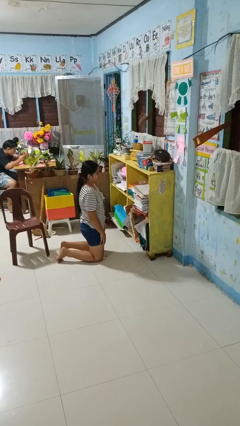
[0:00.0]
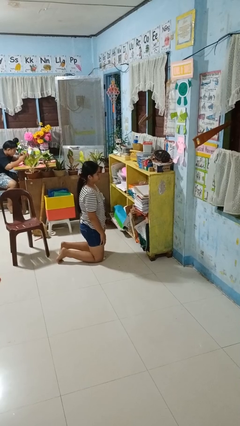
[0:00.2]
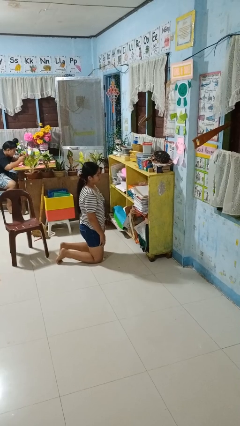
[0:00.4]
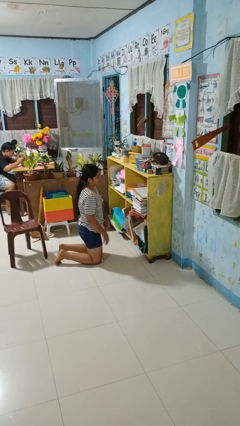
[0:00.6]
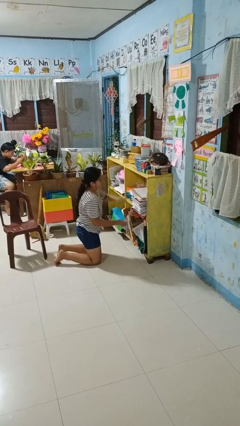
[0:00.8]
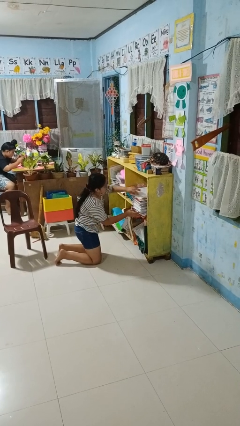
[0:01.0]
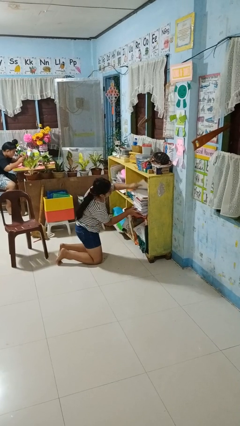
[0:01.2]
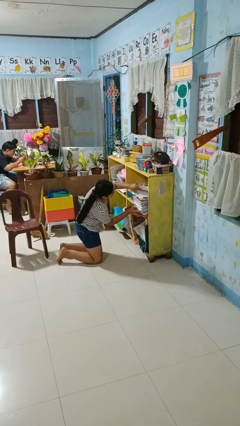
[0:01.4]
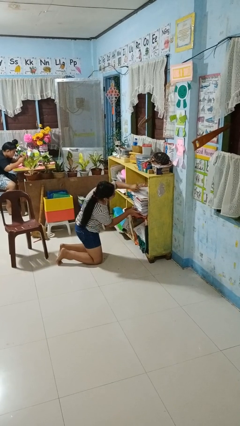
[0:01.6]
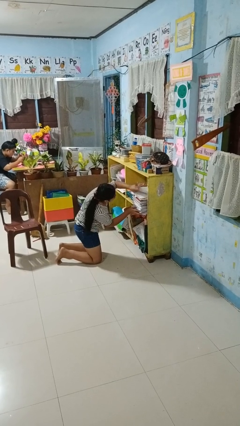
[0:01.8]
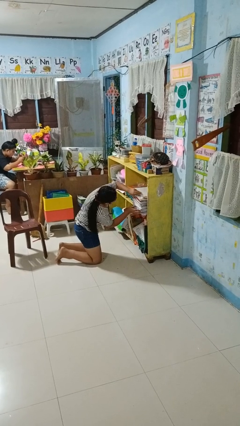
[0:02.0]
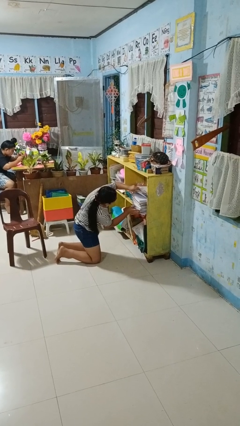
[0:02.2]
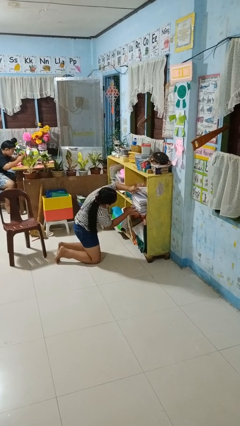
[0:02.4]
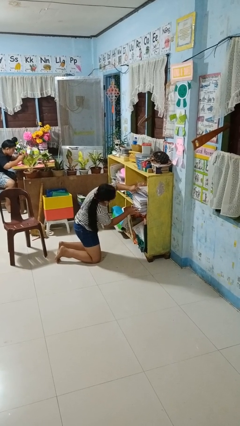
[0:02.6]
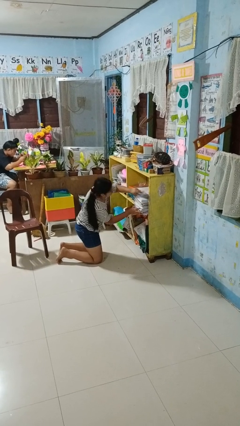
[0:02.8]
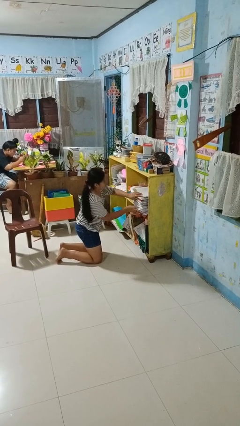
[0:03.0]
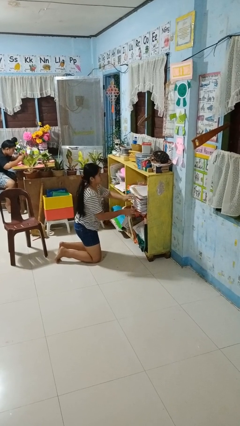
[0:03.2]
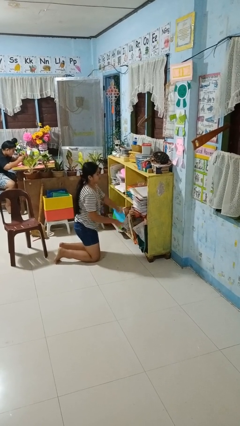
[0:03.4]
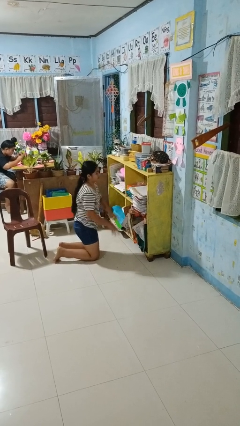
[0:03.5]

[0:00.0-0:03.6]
person searches in cabinet

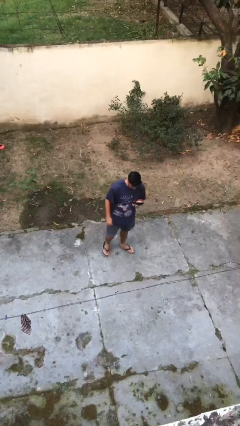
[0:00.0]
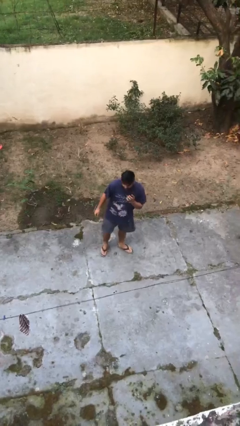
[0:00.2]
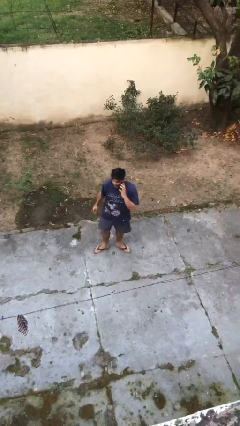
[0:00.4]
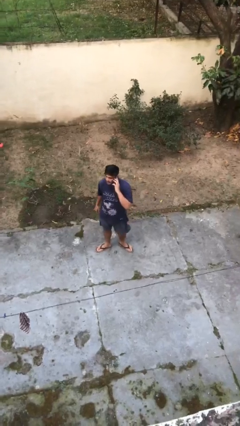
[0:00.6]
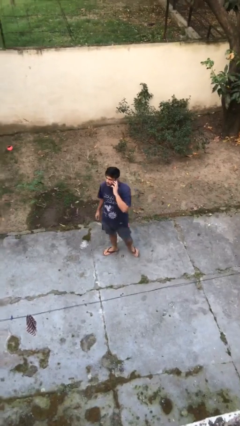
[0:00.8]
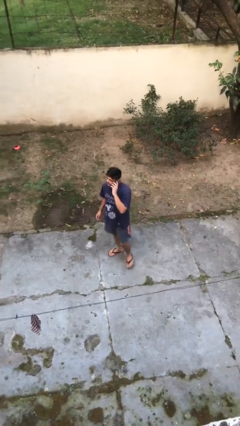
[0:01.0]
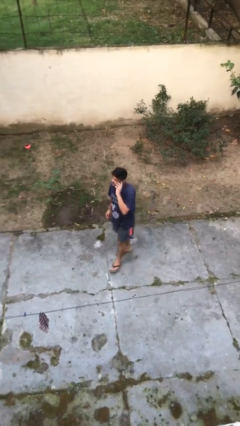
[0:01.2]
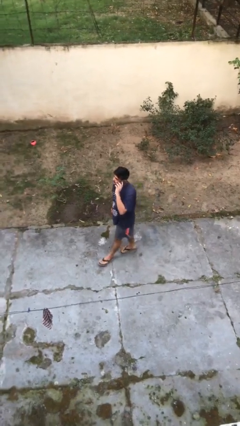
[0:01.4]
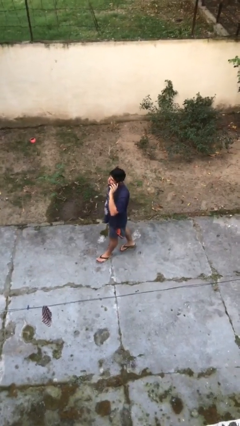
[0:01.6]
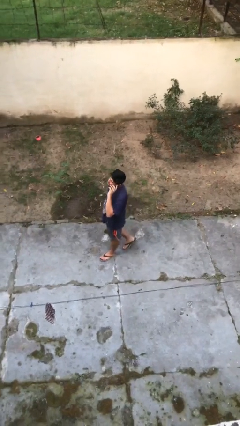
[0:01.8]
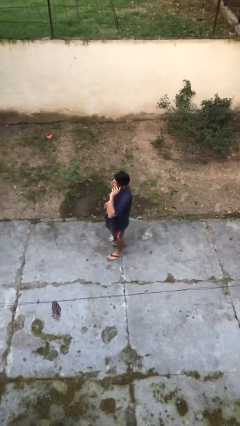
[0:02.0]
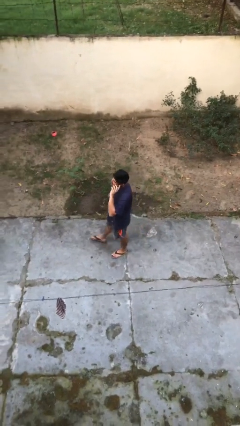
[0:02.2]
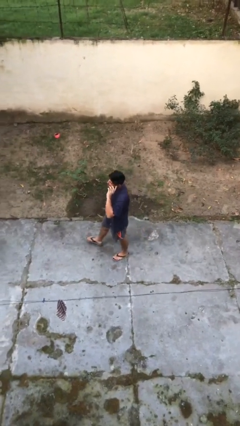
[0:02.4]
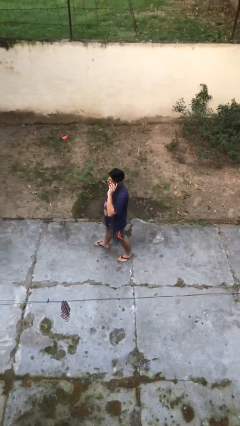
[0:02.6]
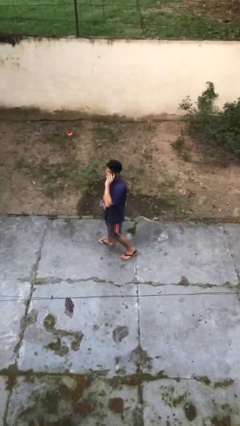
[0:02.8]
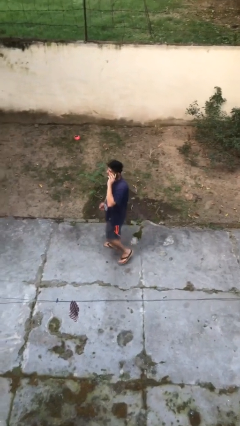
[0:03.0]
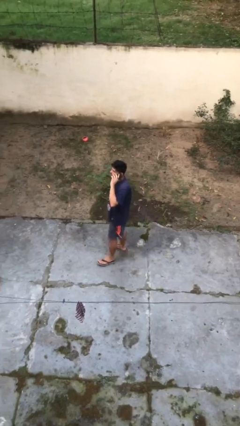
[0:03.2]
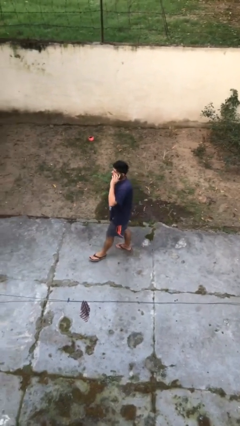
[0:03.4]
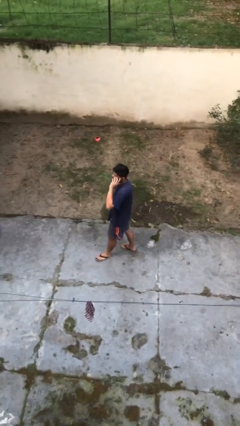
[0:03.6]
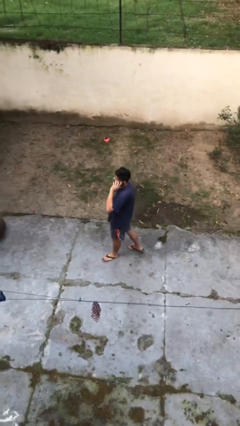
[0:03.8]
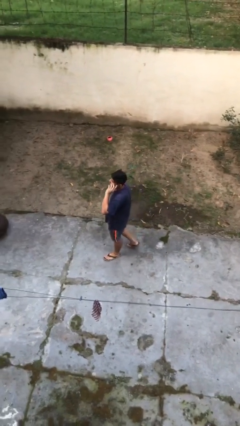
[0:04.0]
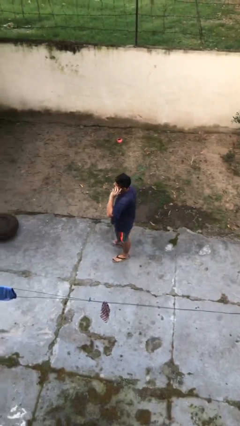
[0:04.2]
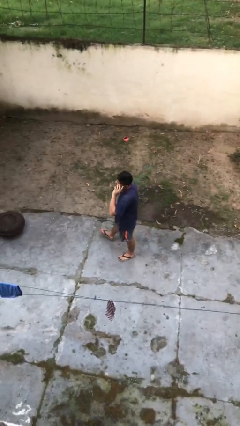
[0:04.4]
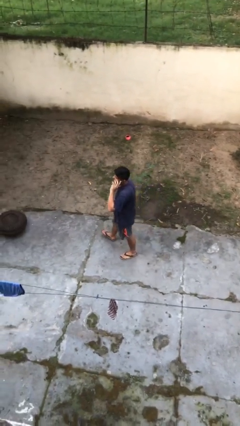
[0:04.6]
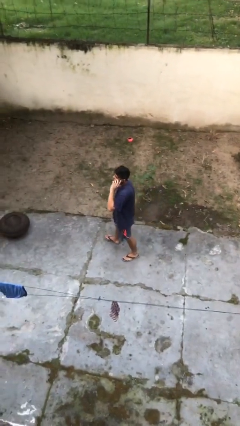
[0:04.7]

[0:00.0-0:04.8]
person talks on phone

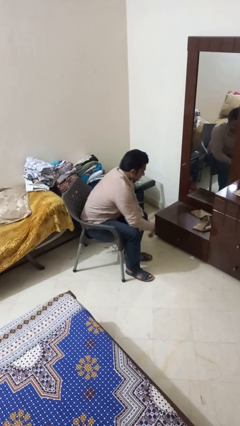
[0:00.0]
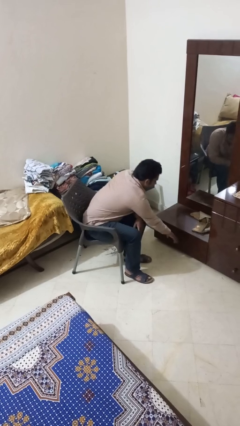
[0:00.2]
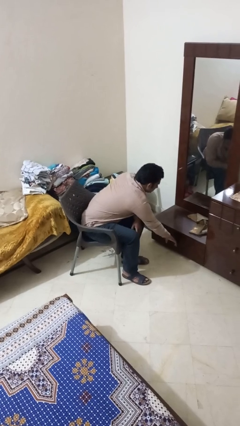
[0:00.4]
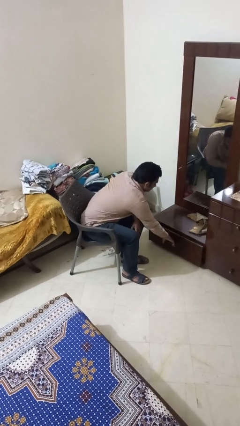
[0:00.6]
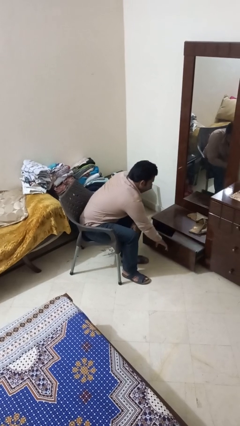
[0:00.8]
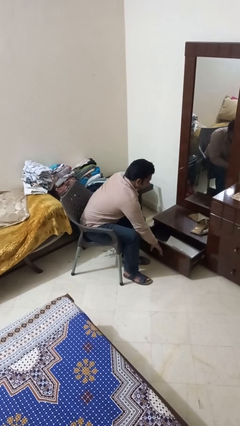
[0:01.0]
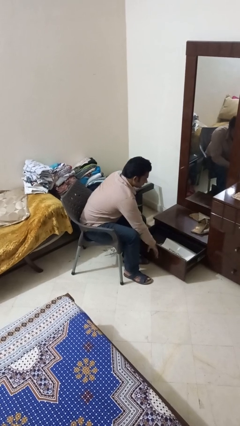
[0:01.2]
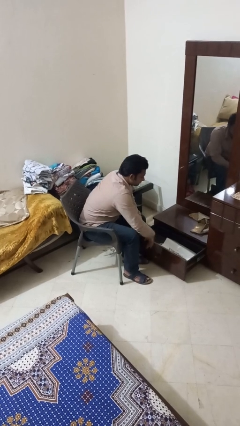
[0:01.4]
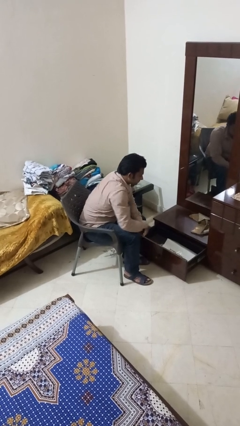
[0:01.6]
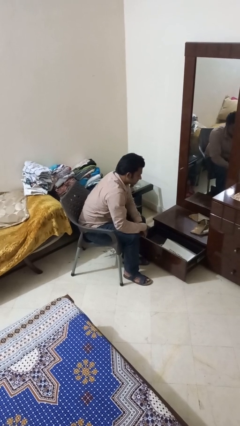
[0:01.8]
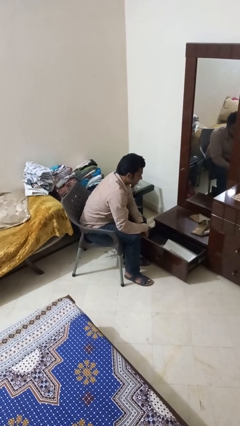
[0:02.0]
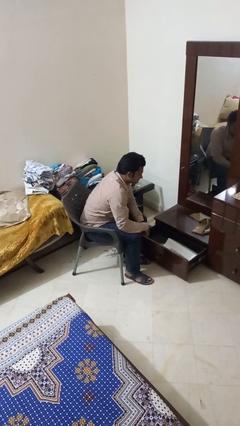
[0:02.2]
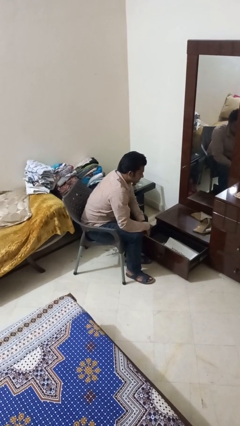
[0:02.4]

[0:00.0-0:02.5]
person opens closet door

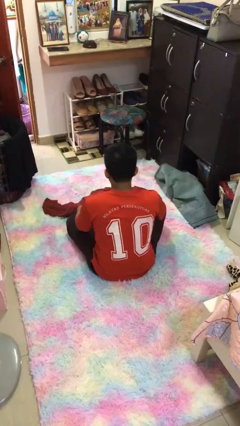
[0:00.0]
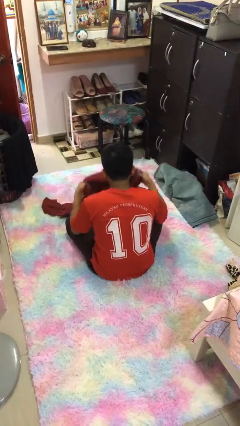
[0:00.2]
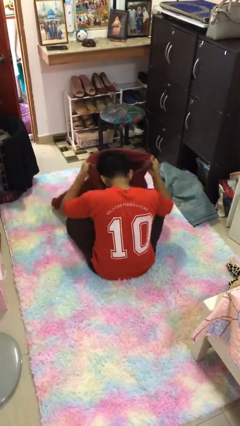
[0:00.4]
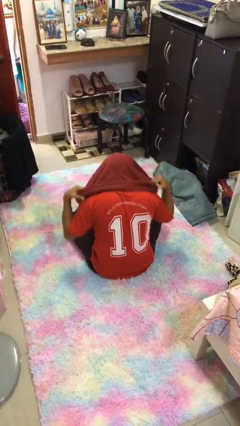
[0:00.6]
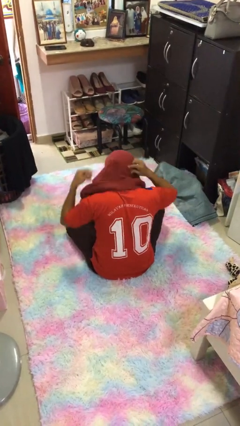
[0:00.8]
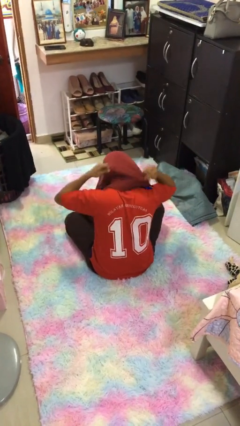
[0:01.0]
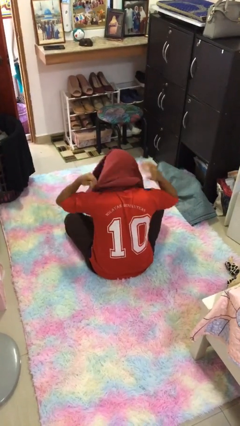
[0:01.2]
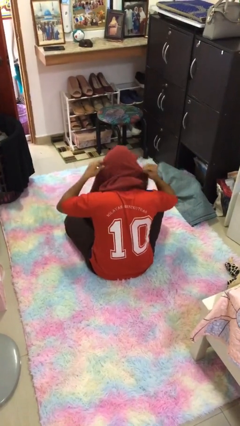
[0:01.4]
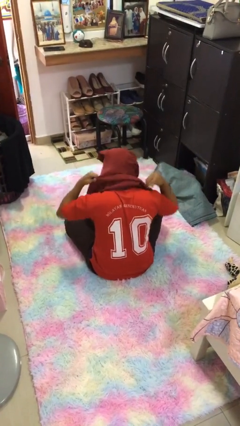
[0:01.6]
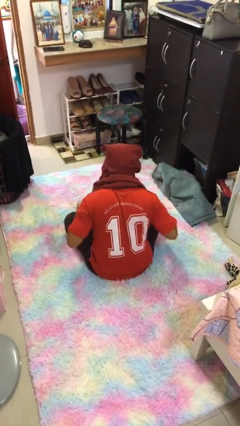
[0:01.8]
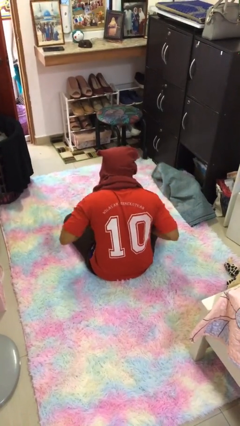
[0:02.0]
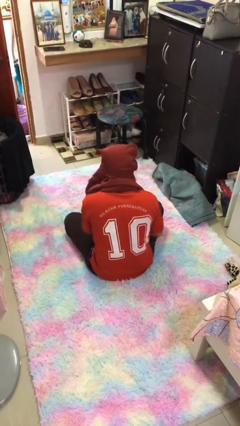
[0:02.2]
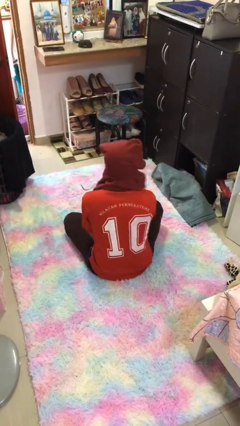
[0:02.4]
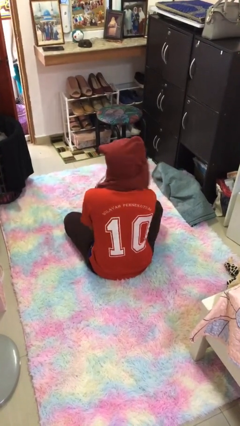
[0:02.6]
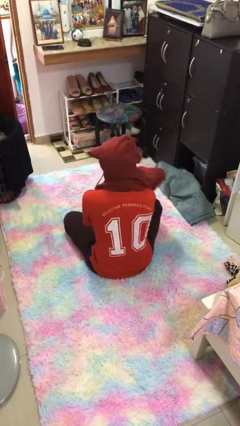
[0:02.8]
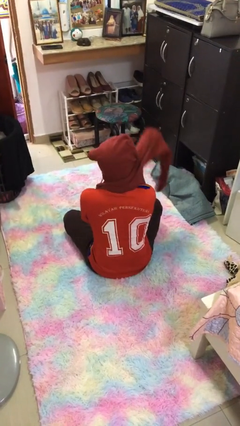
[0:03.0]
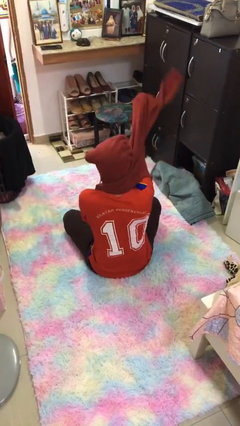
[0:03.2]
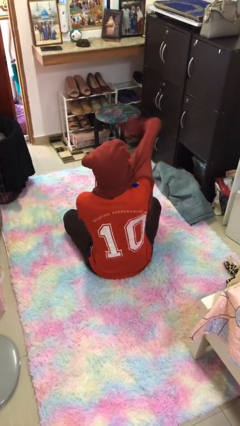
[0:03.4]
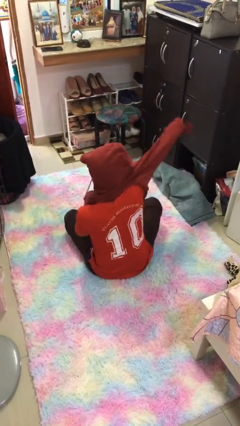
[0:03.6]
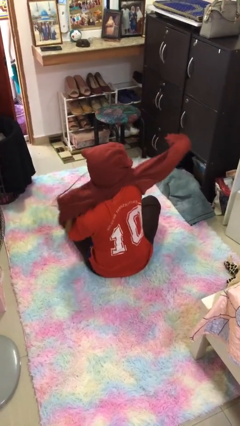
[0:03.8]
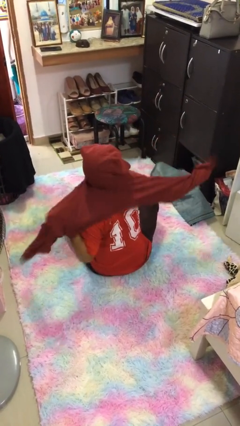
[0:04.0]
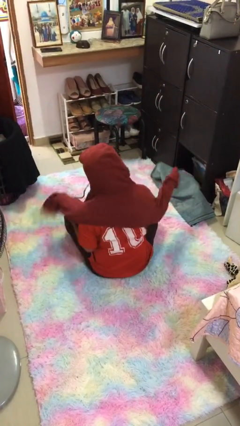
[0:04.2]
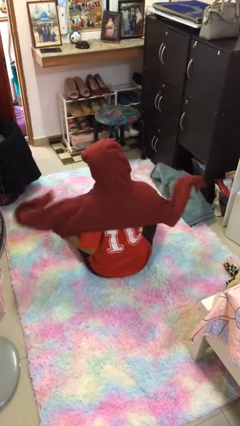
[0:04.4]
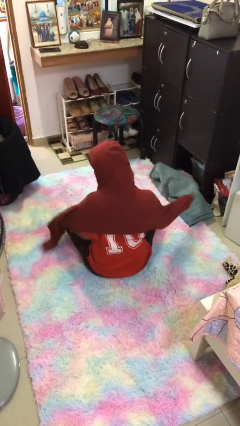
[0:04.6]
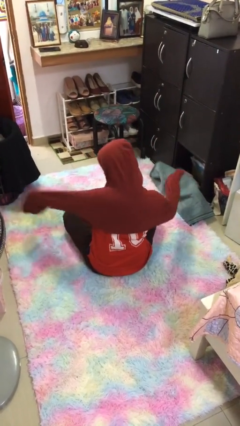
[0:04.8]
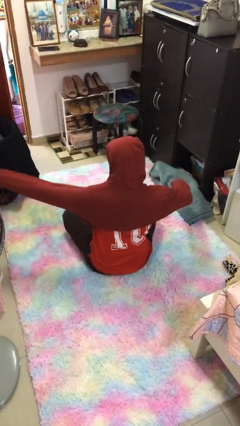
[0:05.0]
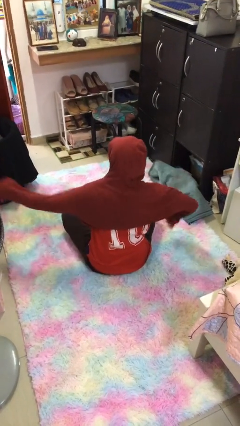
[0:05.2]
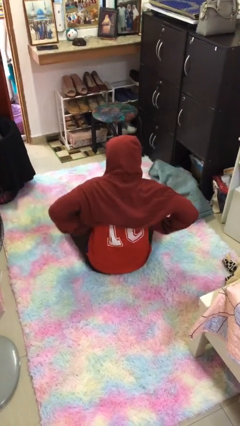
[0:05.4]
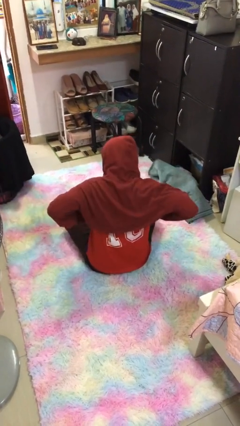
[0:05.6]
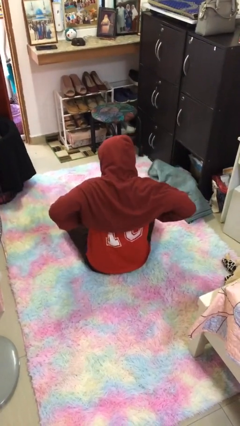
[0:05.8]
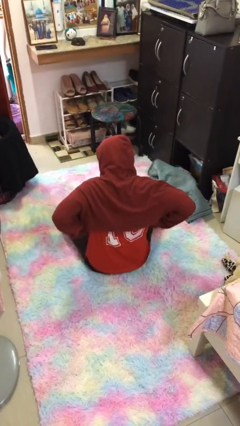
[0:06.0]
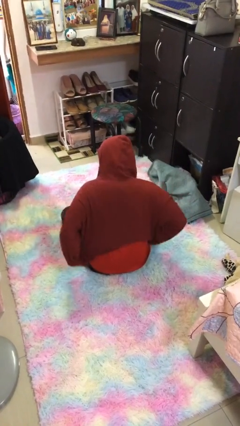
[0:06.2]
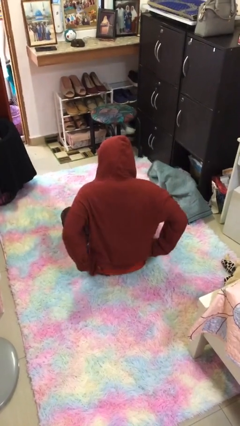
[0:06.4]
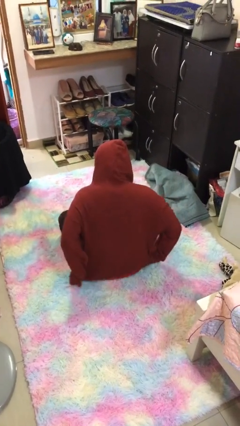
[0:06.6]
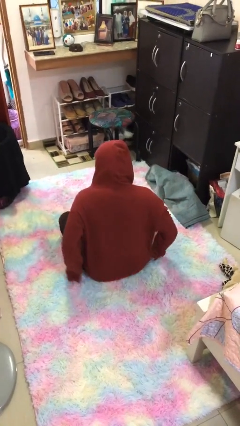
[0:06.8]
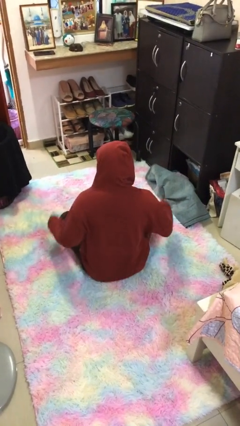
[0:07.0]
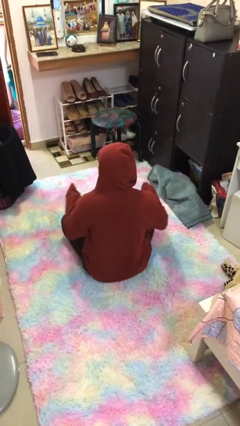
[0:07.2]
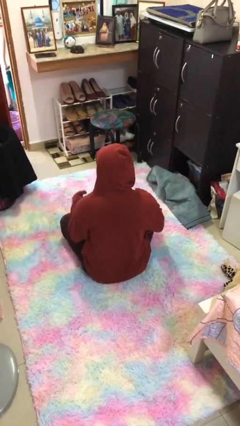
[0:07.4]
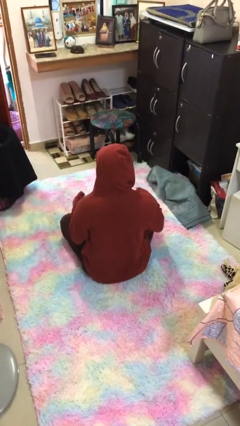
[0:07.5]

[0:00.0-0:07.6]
person puts on hoodie
